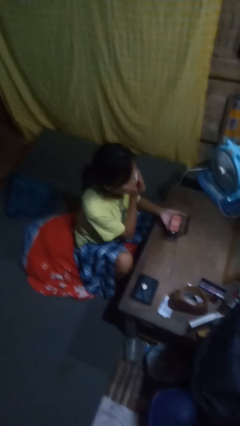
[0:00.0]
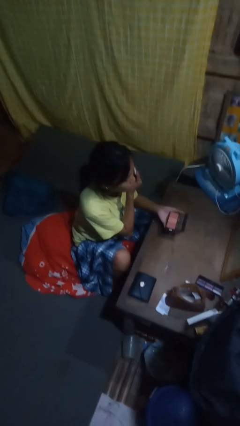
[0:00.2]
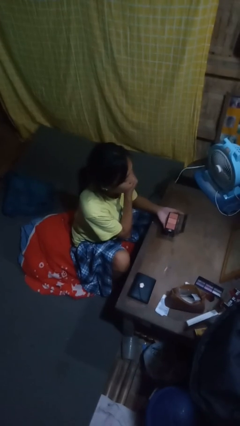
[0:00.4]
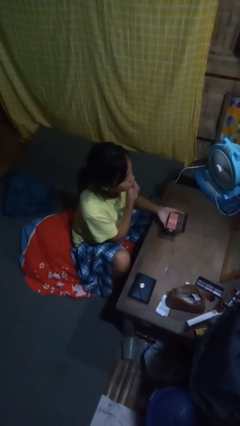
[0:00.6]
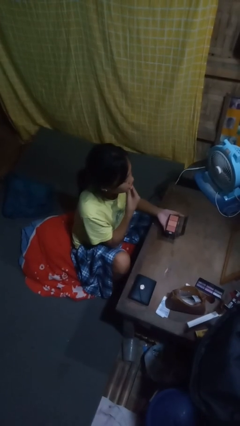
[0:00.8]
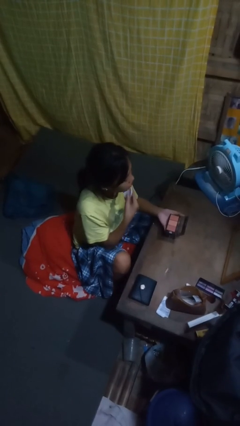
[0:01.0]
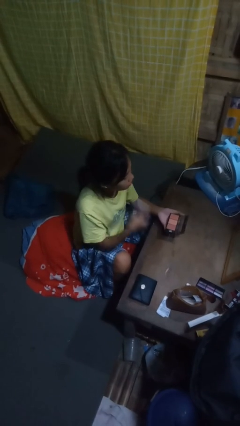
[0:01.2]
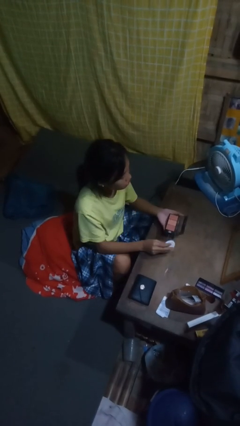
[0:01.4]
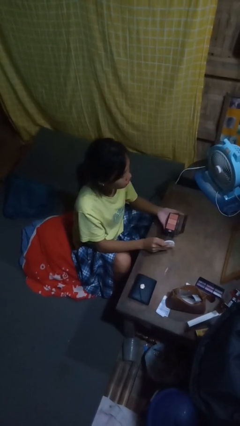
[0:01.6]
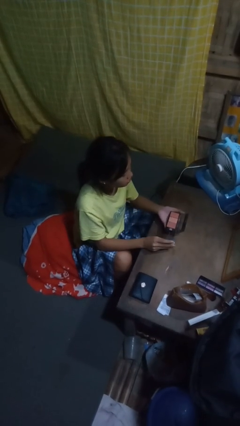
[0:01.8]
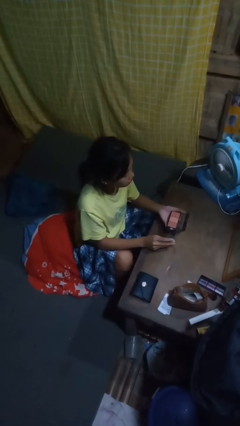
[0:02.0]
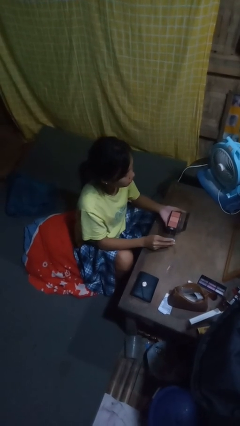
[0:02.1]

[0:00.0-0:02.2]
person applies foundation makeup

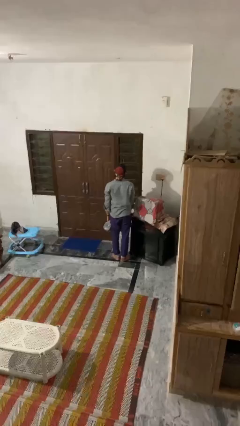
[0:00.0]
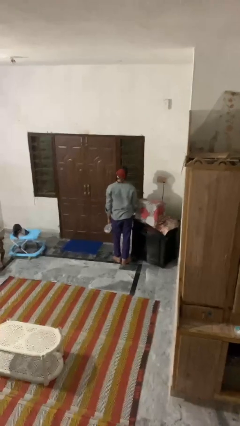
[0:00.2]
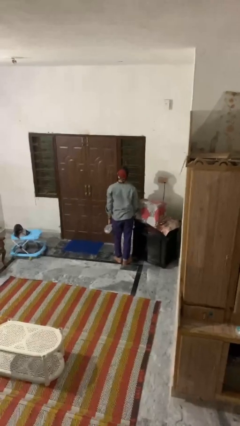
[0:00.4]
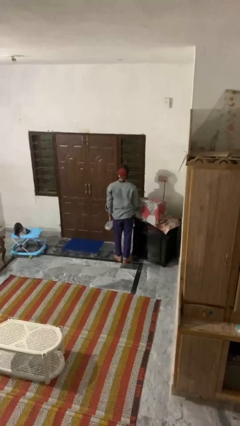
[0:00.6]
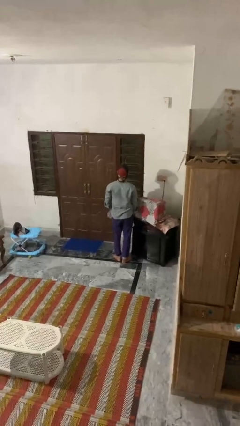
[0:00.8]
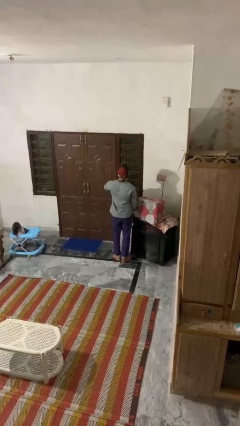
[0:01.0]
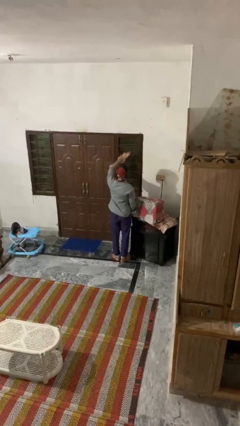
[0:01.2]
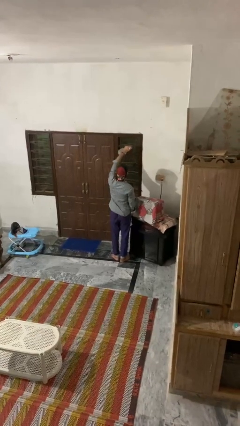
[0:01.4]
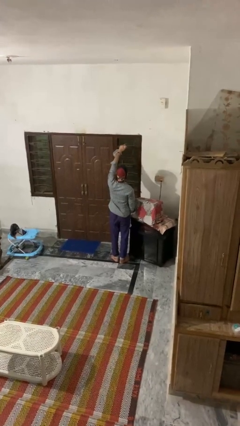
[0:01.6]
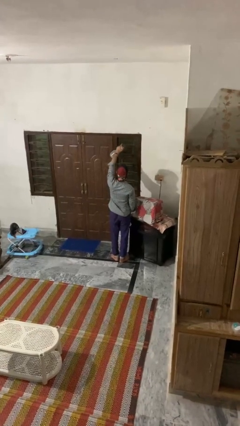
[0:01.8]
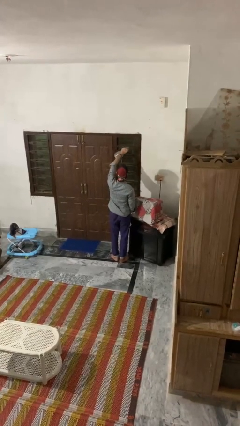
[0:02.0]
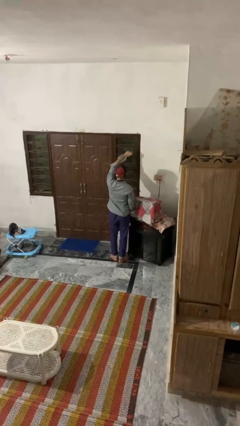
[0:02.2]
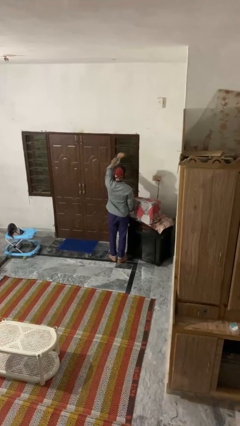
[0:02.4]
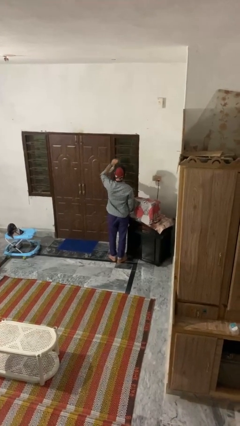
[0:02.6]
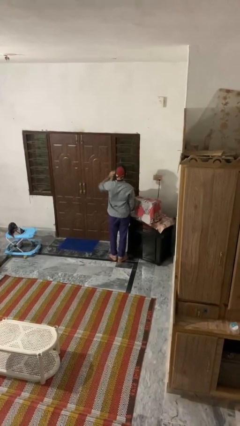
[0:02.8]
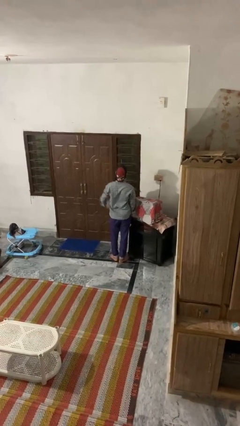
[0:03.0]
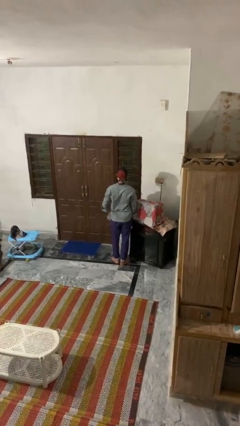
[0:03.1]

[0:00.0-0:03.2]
person sprays from bottle

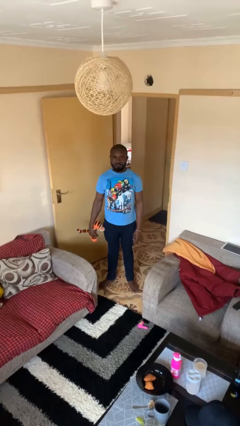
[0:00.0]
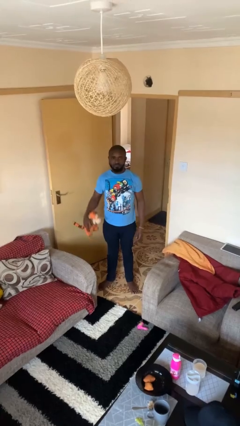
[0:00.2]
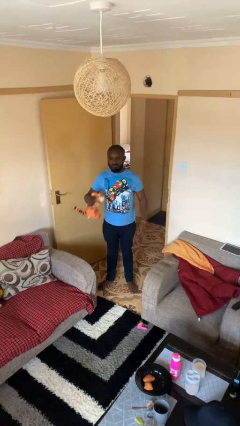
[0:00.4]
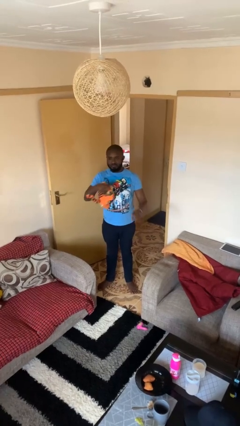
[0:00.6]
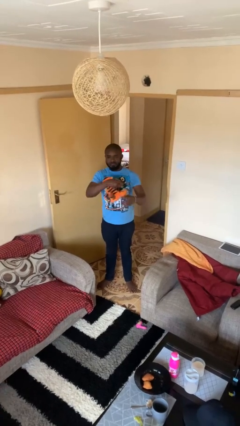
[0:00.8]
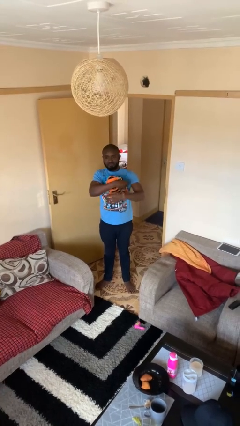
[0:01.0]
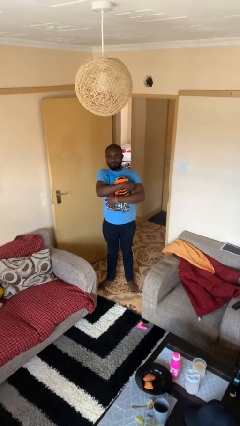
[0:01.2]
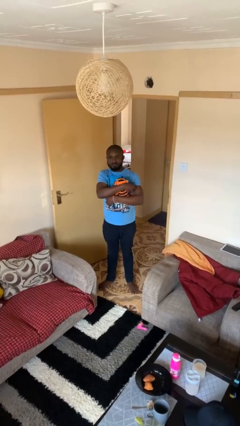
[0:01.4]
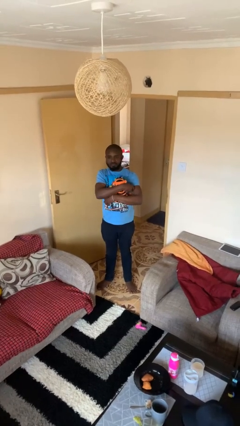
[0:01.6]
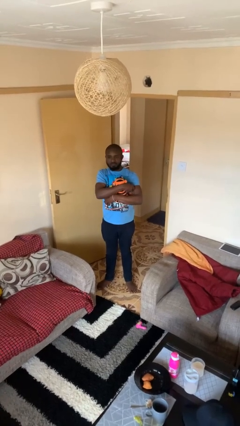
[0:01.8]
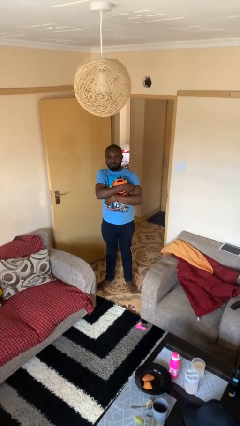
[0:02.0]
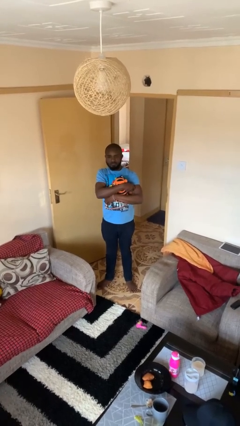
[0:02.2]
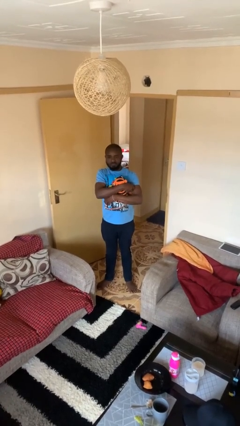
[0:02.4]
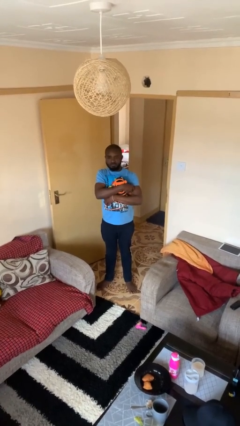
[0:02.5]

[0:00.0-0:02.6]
person hugs stuffed animal

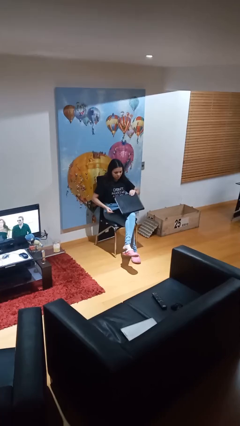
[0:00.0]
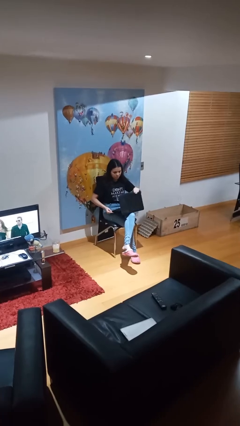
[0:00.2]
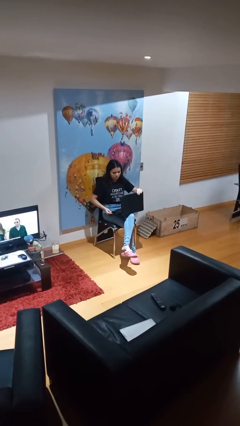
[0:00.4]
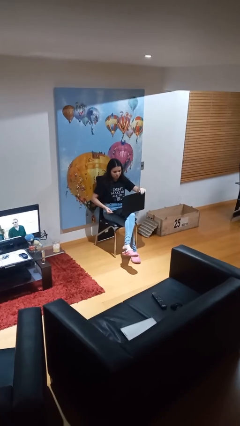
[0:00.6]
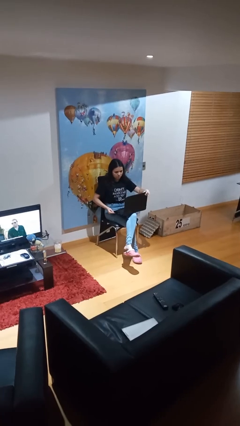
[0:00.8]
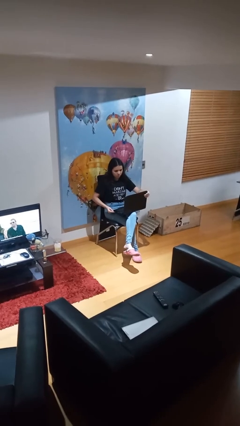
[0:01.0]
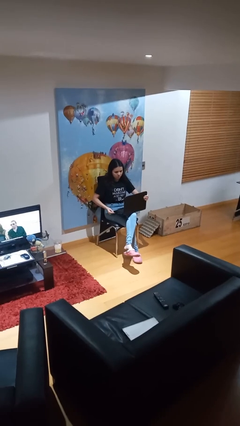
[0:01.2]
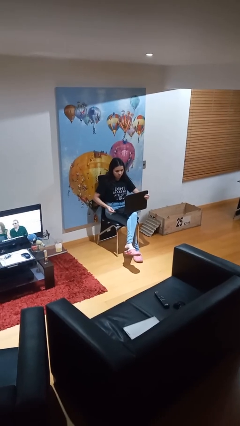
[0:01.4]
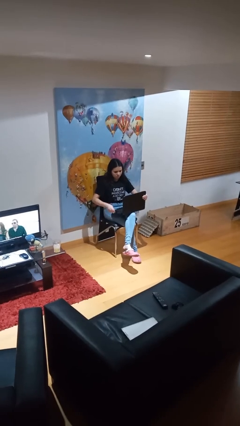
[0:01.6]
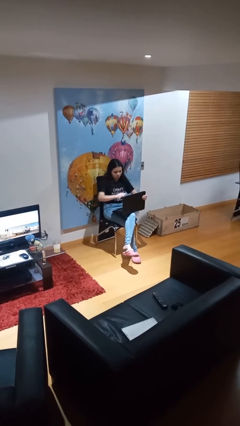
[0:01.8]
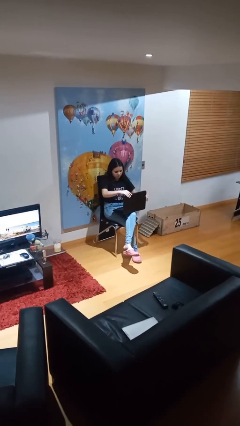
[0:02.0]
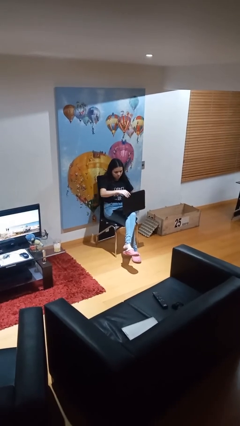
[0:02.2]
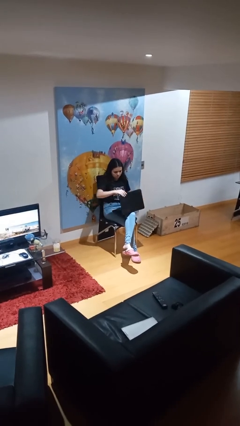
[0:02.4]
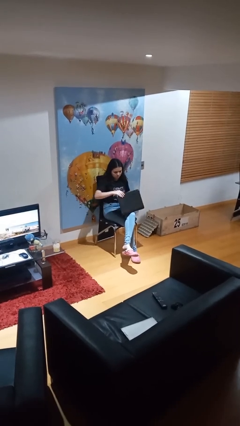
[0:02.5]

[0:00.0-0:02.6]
person interacts with laptop

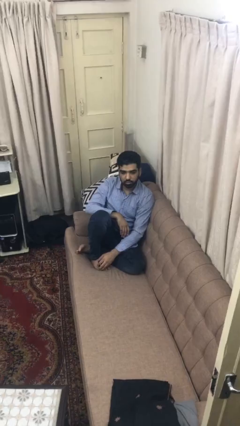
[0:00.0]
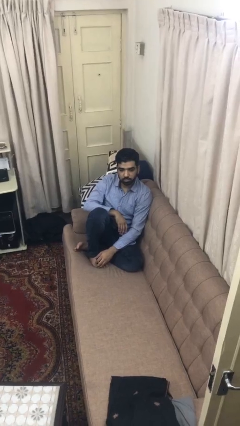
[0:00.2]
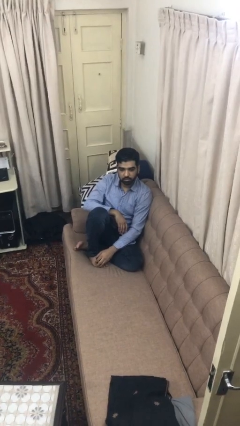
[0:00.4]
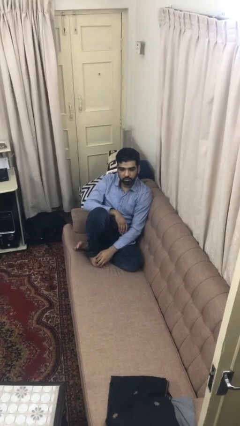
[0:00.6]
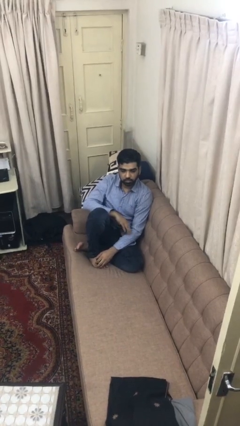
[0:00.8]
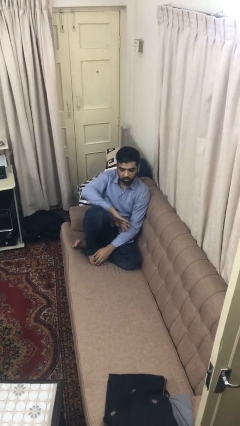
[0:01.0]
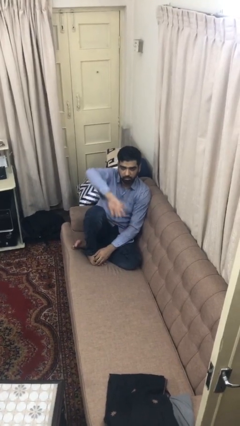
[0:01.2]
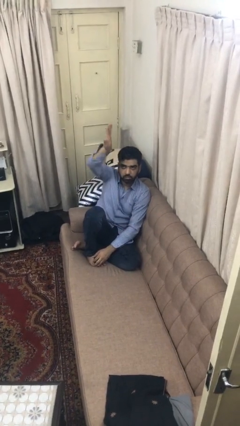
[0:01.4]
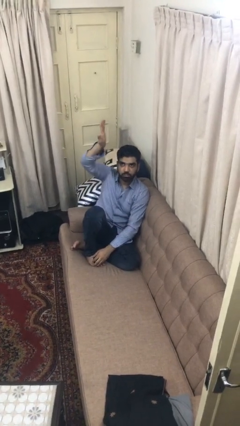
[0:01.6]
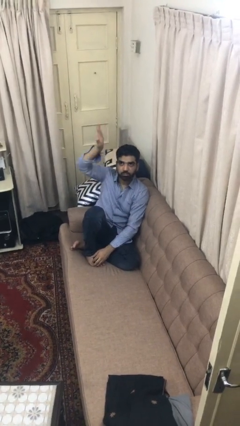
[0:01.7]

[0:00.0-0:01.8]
person gestures swipe up

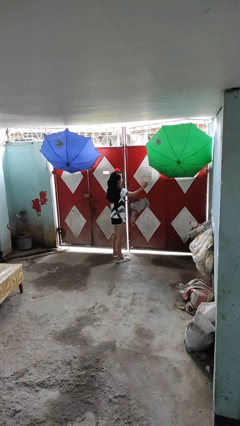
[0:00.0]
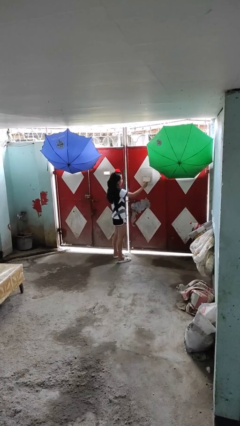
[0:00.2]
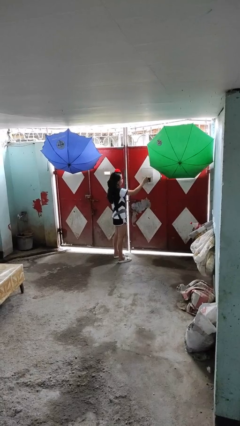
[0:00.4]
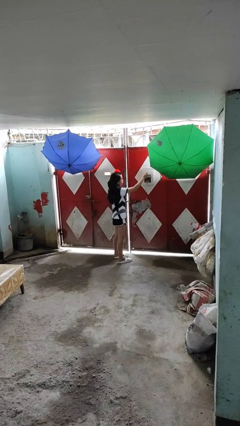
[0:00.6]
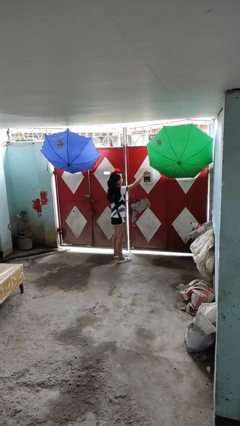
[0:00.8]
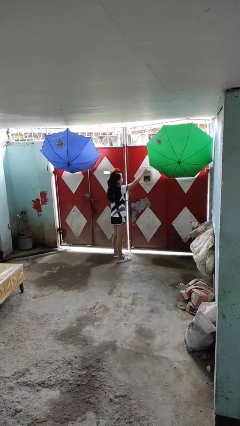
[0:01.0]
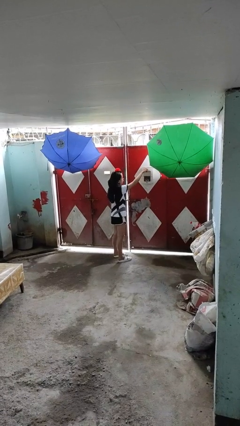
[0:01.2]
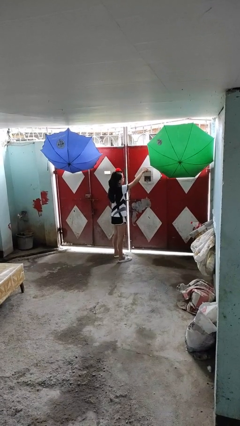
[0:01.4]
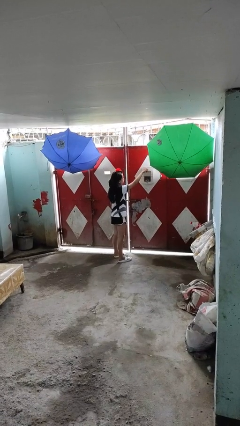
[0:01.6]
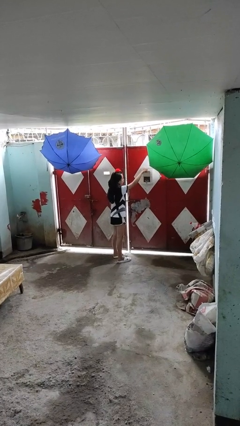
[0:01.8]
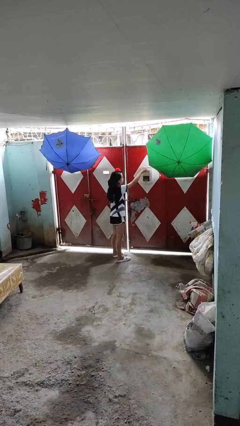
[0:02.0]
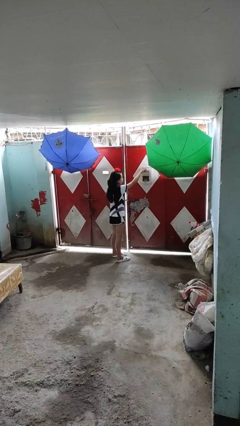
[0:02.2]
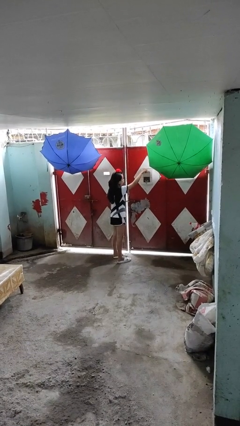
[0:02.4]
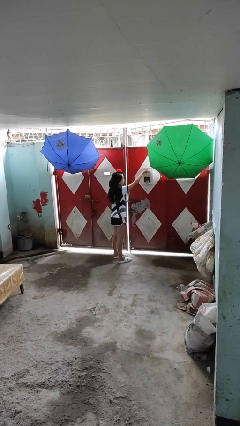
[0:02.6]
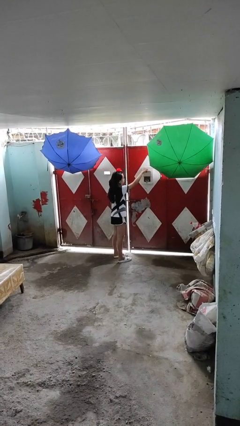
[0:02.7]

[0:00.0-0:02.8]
person opens mailbox

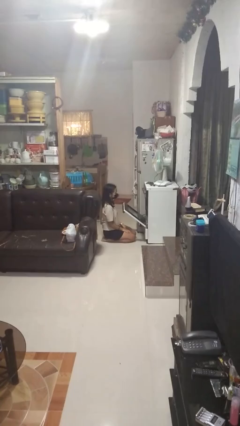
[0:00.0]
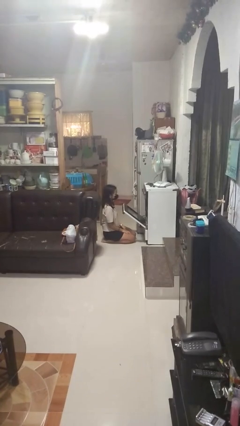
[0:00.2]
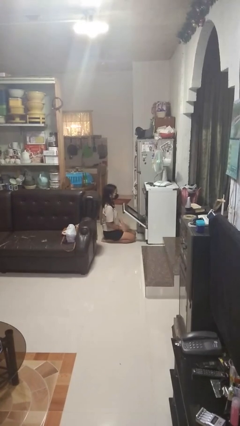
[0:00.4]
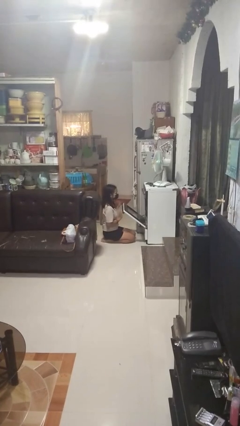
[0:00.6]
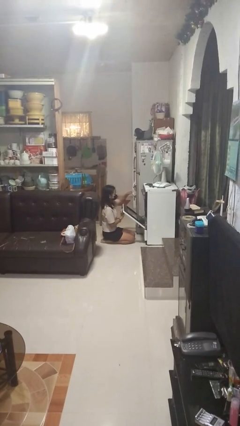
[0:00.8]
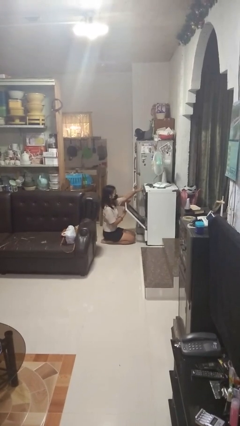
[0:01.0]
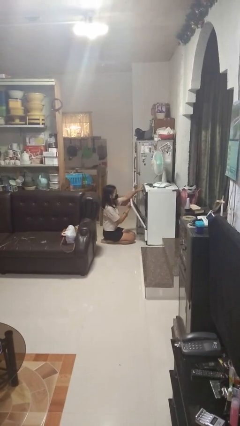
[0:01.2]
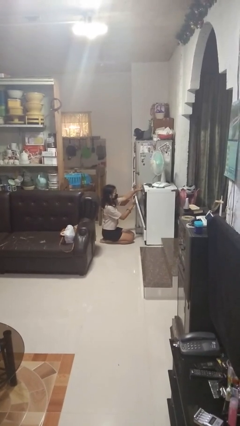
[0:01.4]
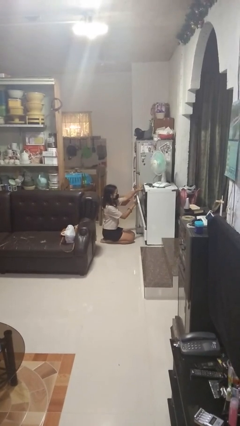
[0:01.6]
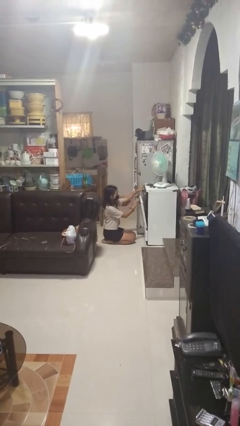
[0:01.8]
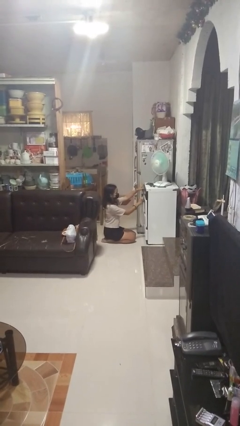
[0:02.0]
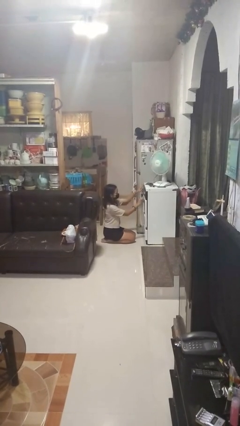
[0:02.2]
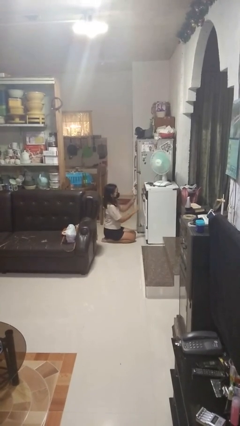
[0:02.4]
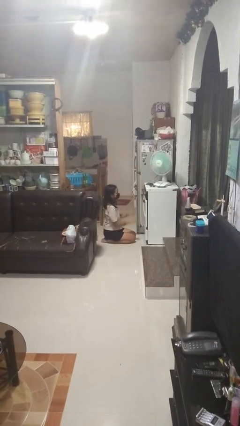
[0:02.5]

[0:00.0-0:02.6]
person closes oven door
